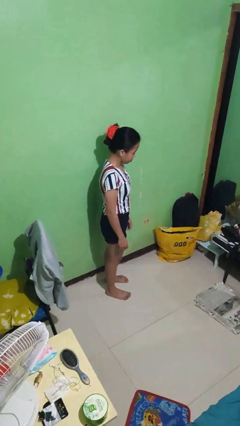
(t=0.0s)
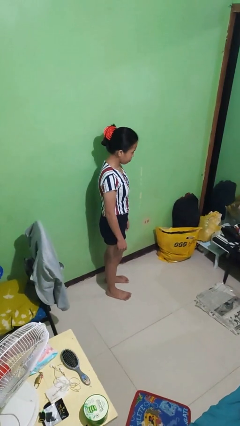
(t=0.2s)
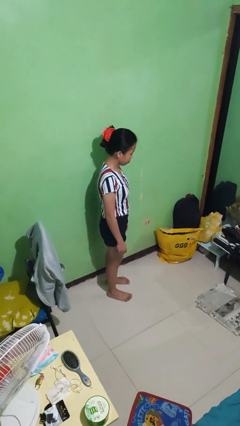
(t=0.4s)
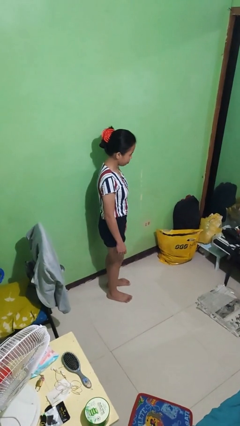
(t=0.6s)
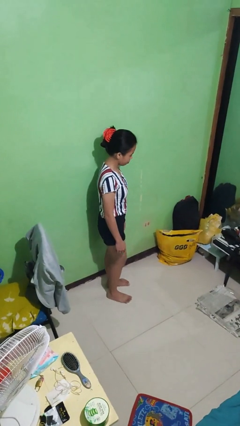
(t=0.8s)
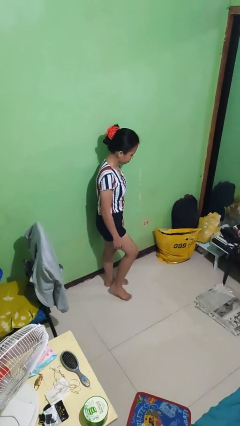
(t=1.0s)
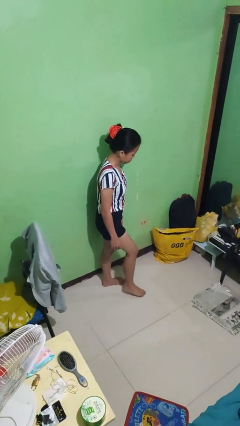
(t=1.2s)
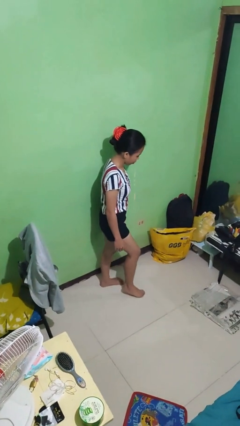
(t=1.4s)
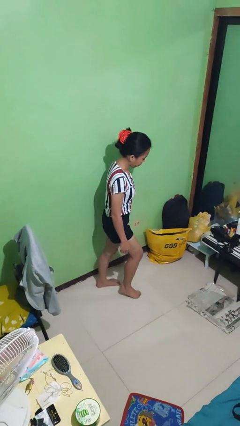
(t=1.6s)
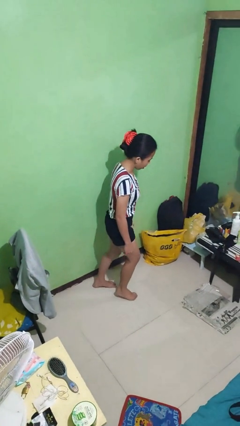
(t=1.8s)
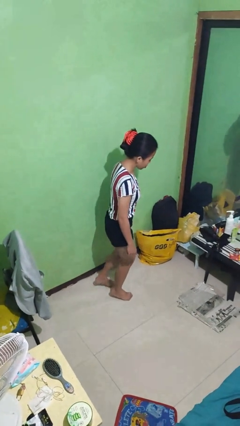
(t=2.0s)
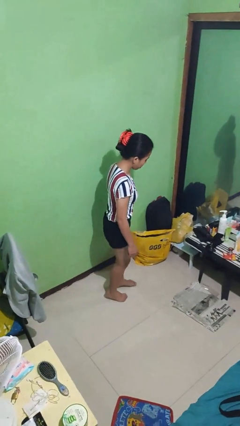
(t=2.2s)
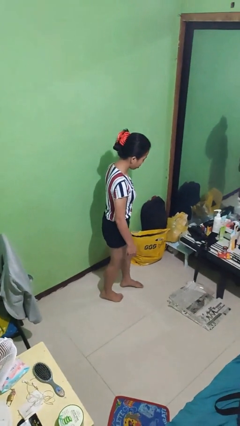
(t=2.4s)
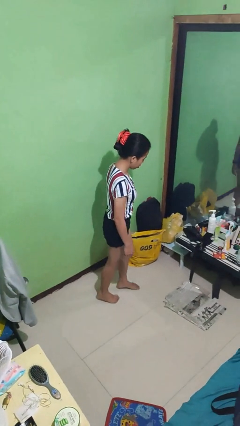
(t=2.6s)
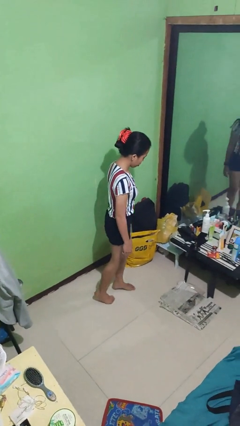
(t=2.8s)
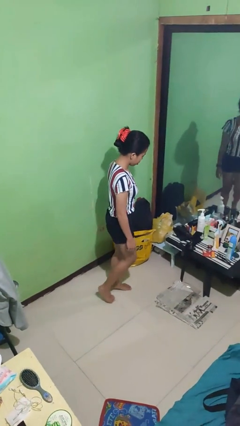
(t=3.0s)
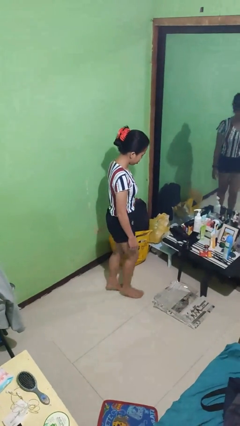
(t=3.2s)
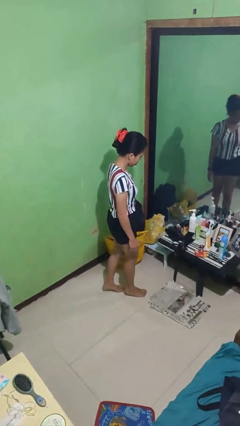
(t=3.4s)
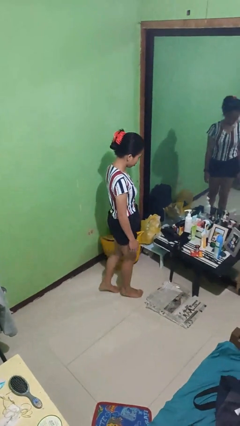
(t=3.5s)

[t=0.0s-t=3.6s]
person walks tiptoe

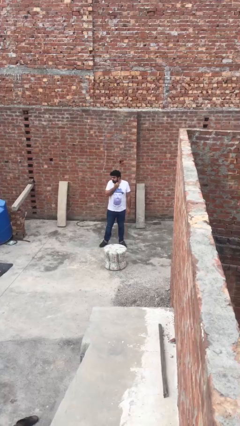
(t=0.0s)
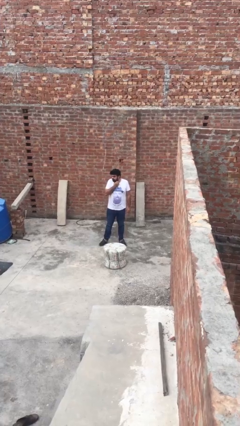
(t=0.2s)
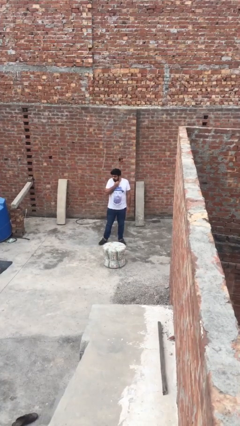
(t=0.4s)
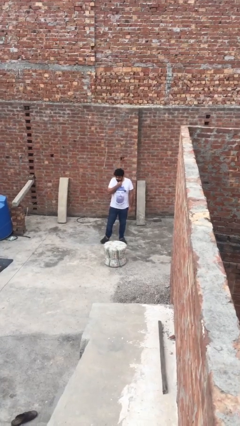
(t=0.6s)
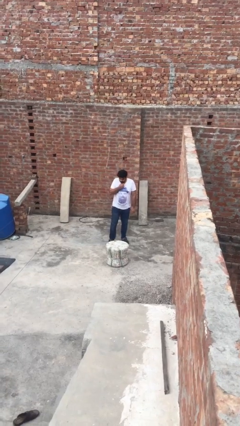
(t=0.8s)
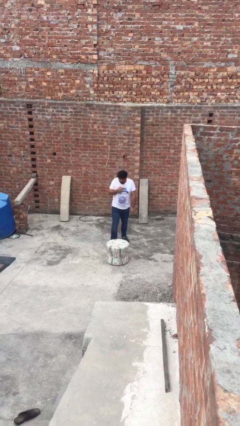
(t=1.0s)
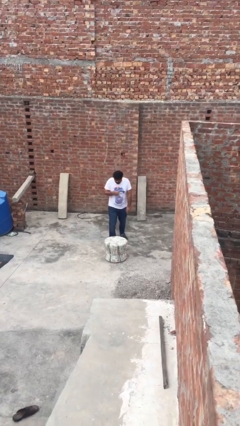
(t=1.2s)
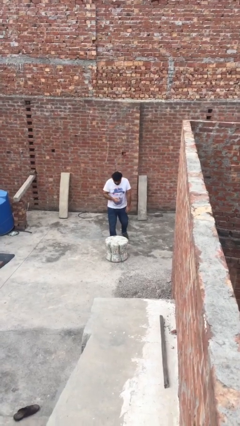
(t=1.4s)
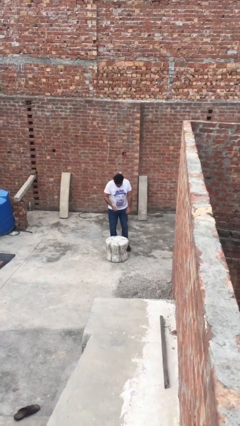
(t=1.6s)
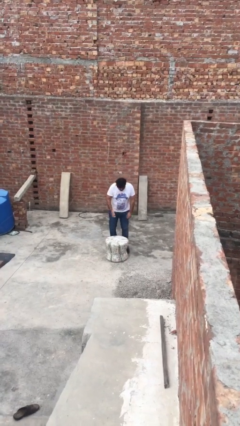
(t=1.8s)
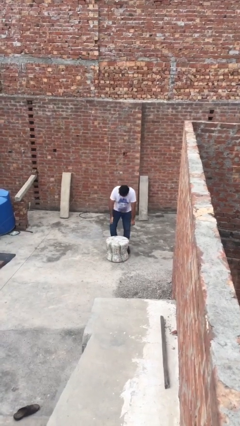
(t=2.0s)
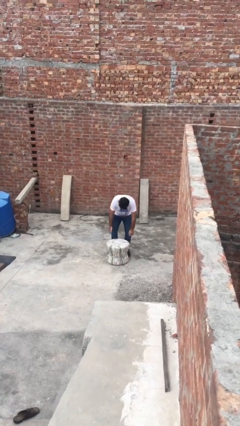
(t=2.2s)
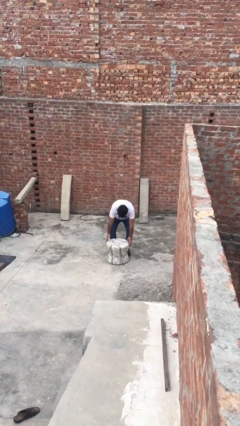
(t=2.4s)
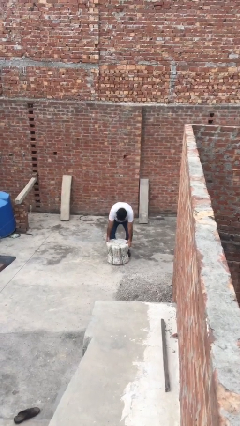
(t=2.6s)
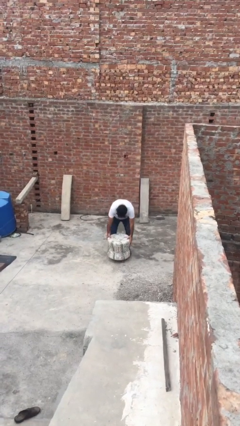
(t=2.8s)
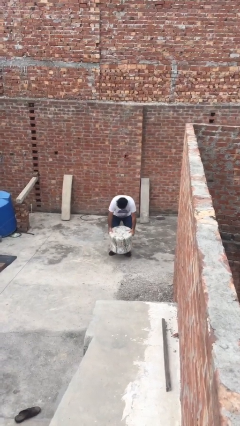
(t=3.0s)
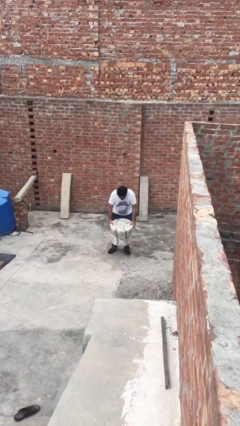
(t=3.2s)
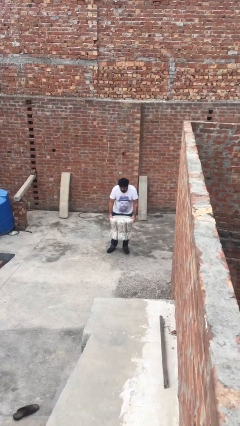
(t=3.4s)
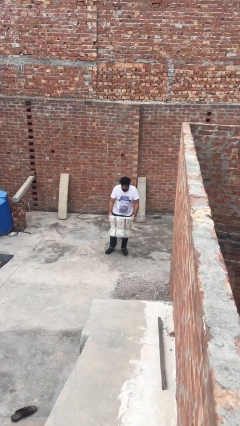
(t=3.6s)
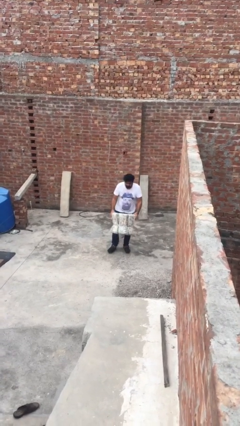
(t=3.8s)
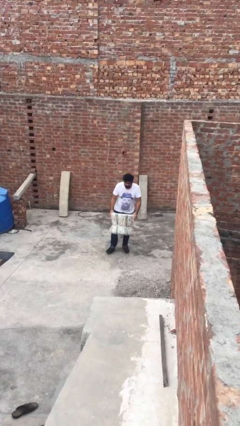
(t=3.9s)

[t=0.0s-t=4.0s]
person picks up object from floor

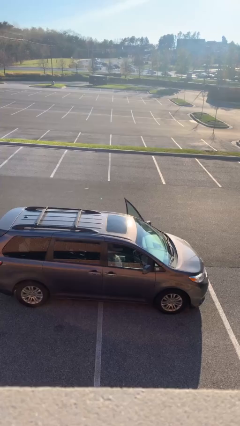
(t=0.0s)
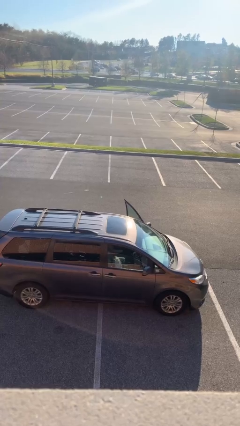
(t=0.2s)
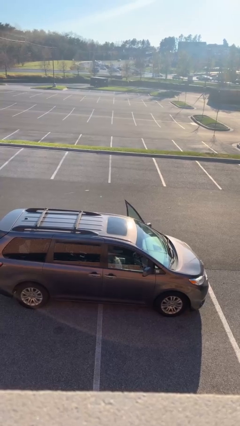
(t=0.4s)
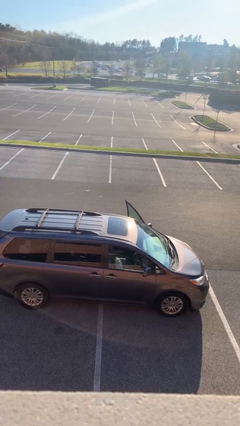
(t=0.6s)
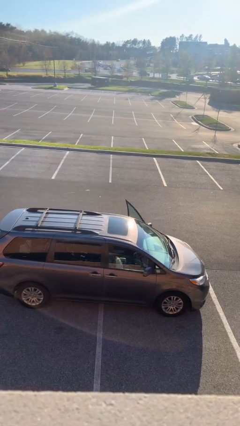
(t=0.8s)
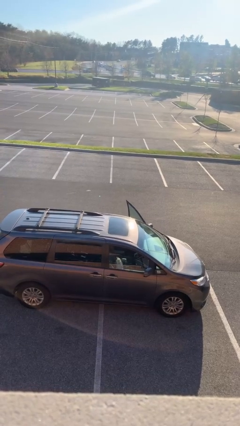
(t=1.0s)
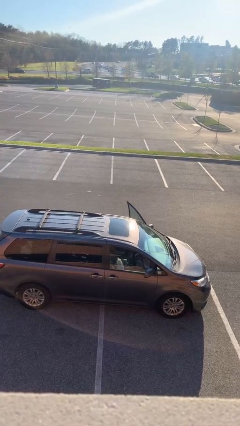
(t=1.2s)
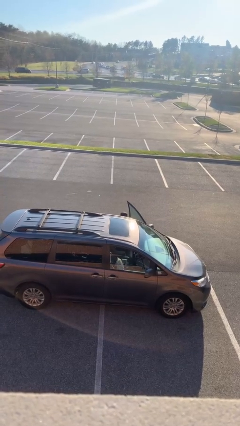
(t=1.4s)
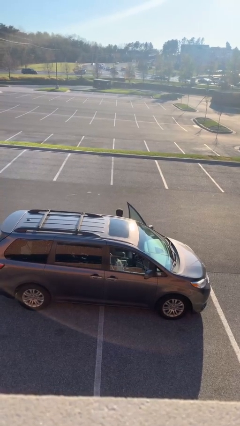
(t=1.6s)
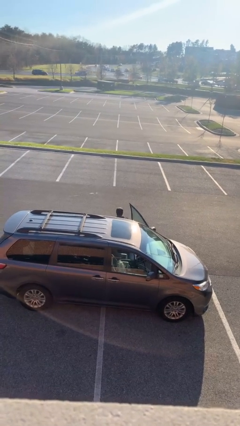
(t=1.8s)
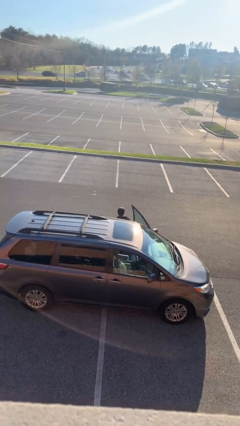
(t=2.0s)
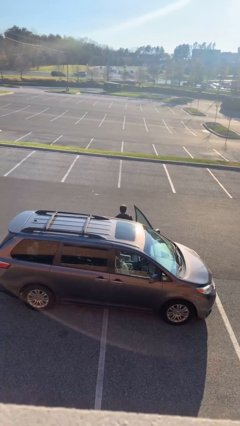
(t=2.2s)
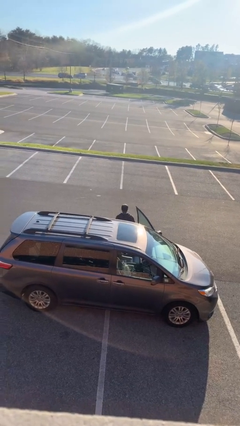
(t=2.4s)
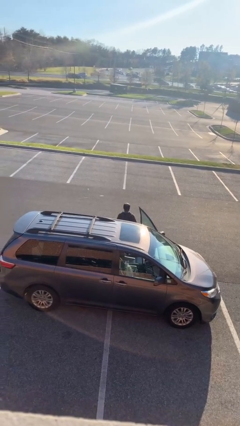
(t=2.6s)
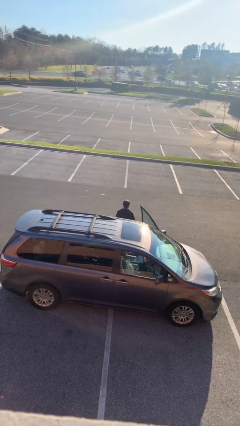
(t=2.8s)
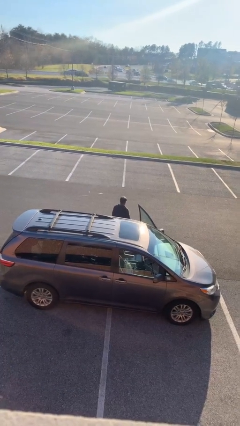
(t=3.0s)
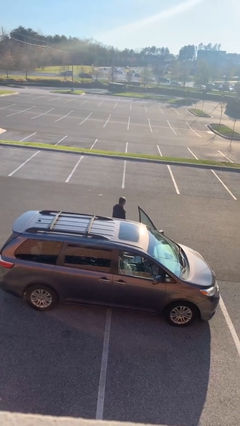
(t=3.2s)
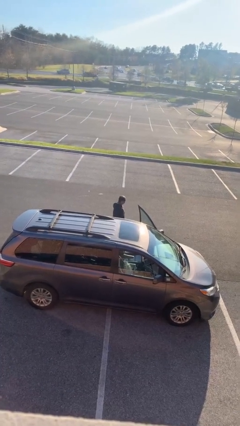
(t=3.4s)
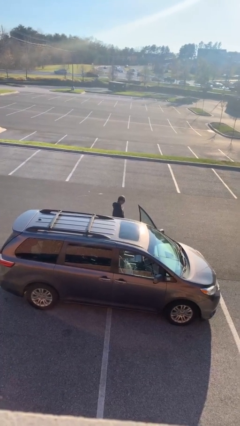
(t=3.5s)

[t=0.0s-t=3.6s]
person exits car

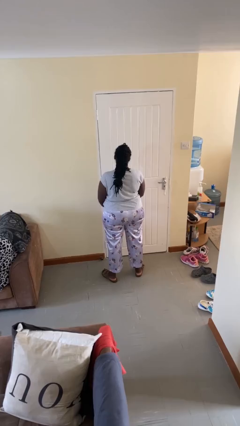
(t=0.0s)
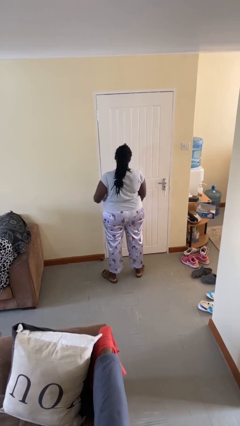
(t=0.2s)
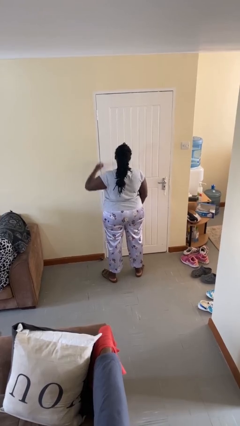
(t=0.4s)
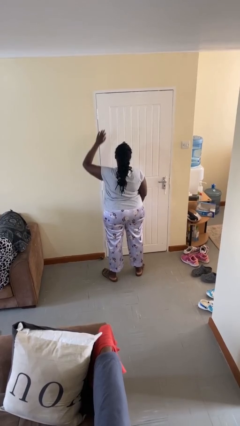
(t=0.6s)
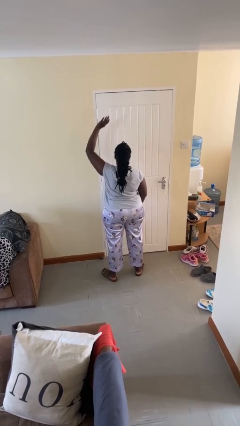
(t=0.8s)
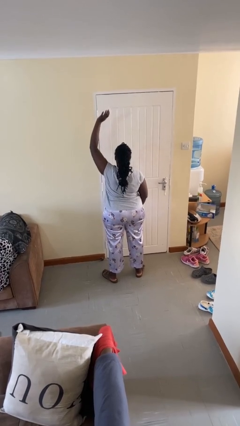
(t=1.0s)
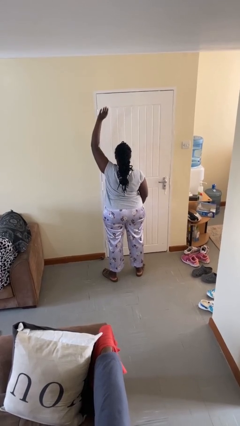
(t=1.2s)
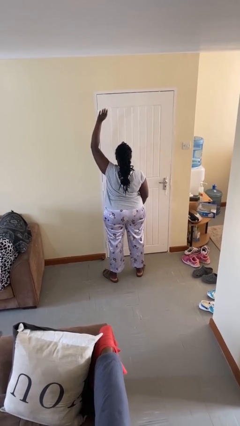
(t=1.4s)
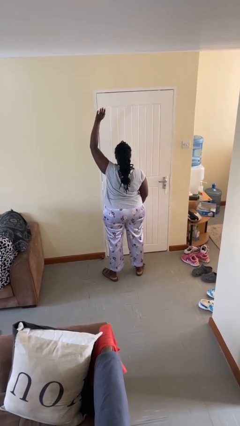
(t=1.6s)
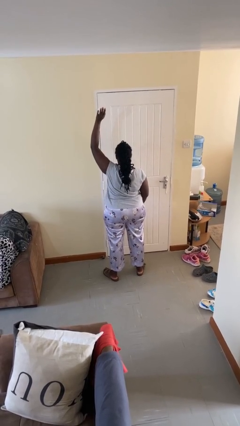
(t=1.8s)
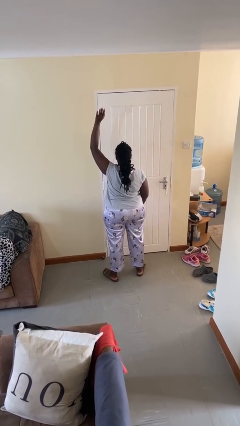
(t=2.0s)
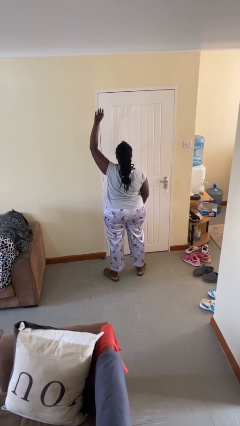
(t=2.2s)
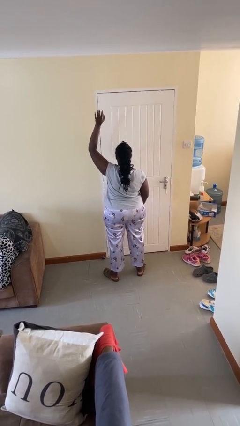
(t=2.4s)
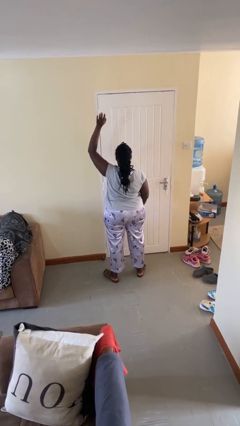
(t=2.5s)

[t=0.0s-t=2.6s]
person gestures raise hand

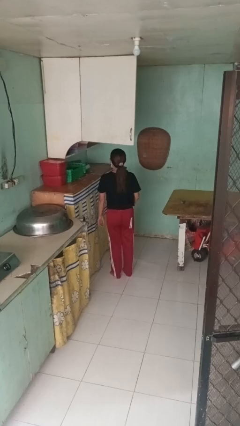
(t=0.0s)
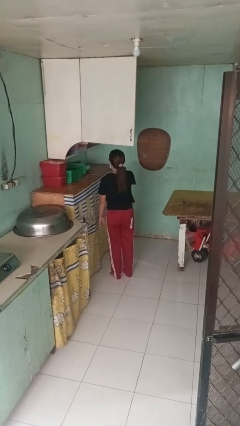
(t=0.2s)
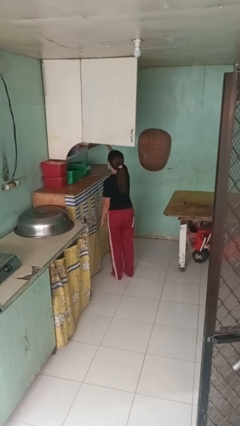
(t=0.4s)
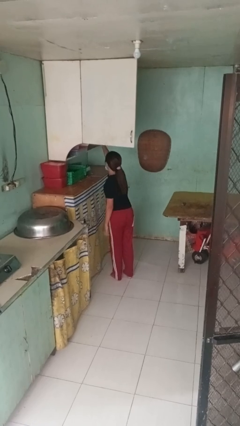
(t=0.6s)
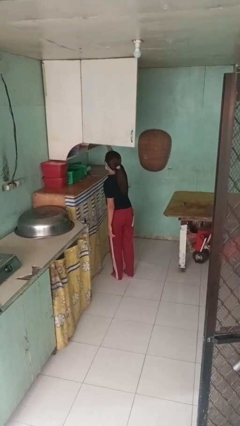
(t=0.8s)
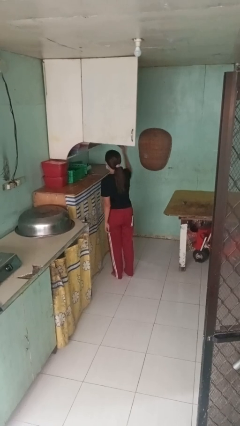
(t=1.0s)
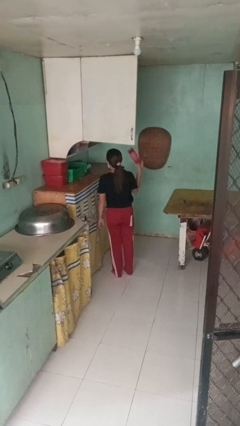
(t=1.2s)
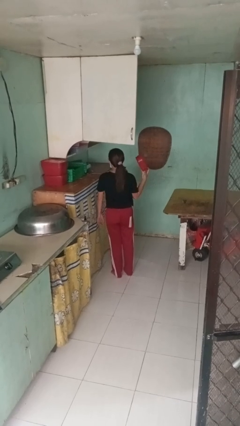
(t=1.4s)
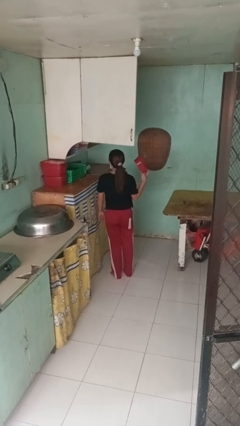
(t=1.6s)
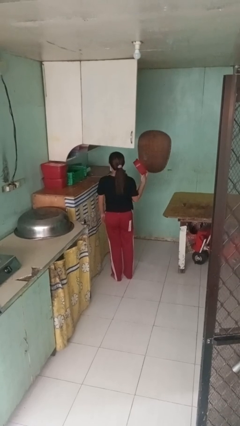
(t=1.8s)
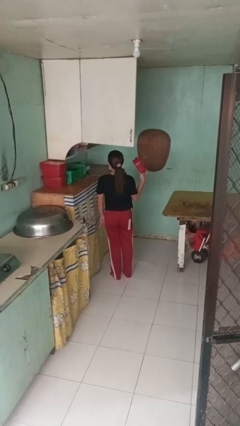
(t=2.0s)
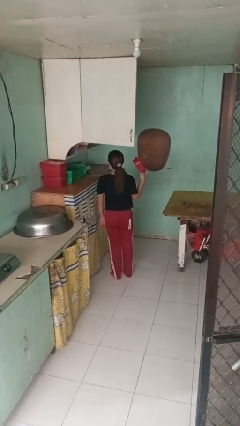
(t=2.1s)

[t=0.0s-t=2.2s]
person takes object from cabinet

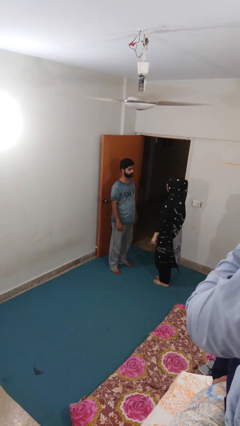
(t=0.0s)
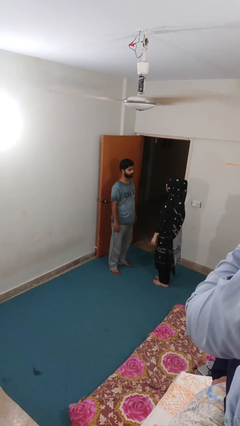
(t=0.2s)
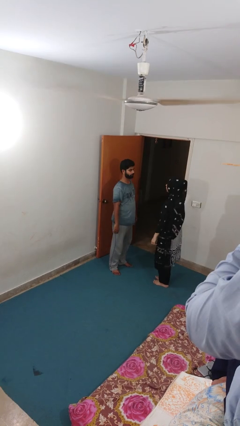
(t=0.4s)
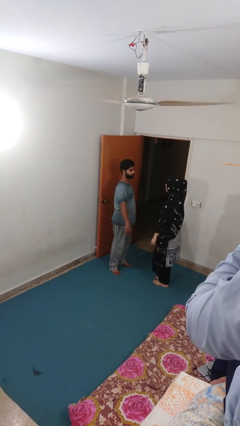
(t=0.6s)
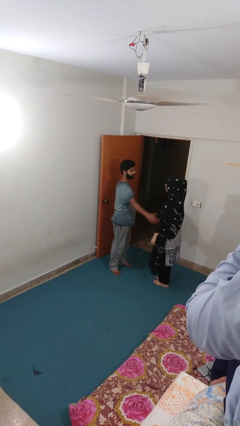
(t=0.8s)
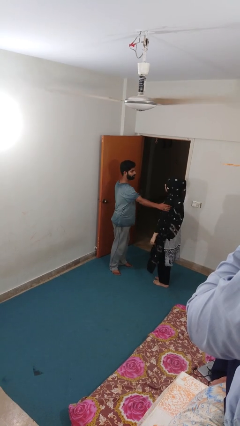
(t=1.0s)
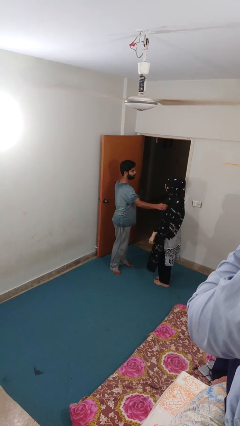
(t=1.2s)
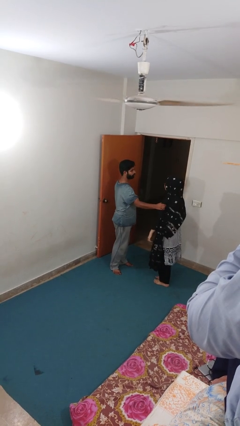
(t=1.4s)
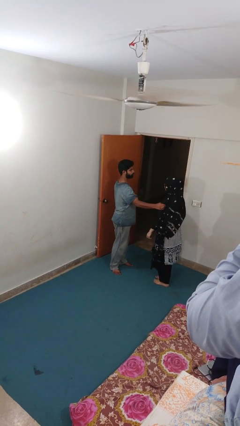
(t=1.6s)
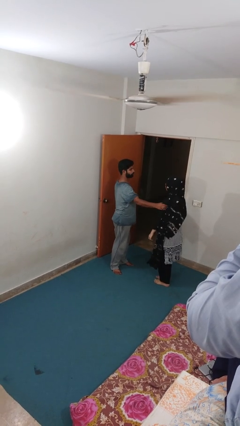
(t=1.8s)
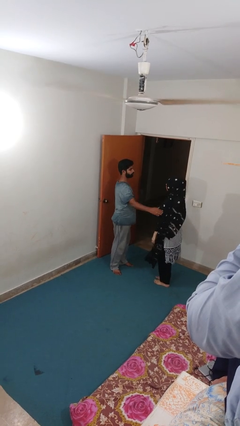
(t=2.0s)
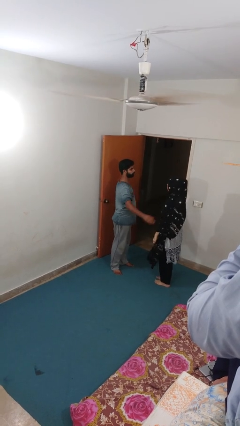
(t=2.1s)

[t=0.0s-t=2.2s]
person grabs person by bicep
